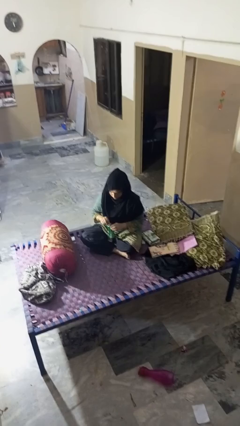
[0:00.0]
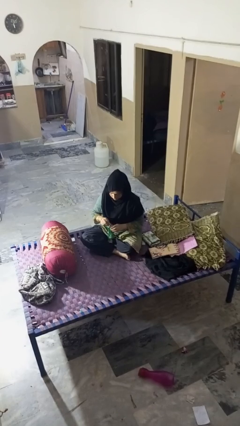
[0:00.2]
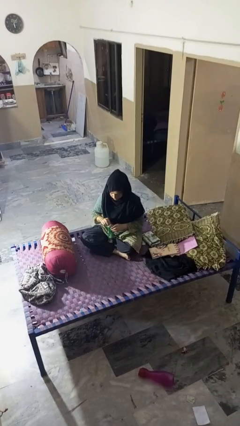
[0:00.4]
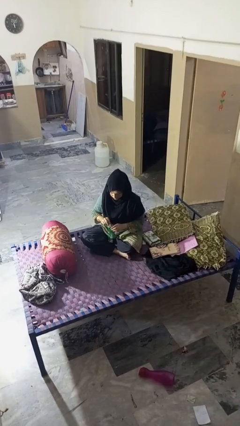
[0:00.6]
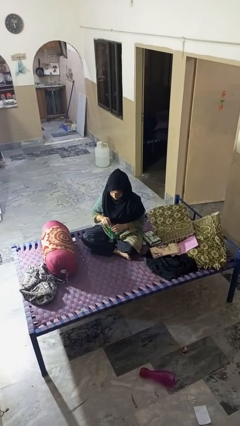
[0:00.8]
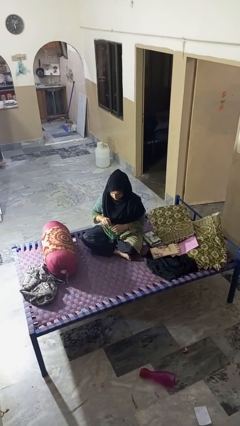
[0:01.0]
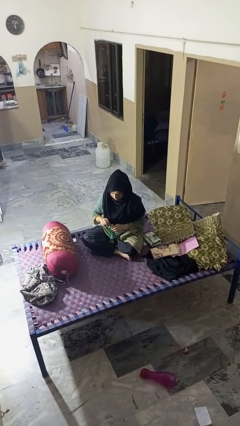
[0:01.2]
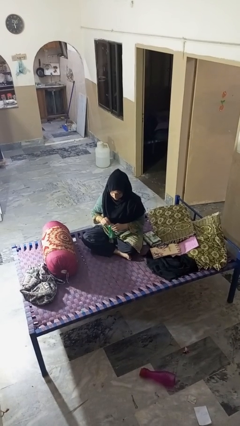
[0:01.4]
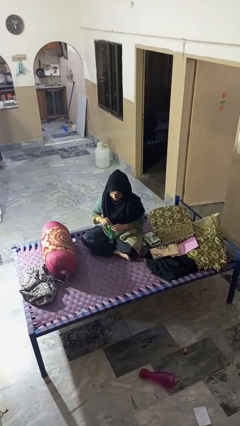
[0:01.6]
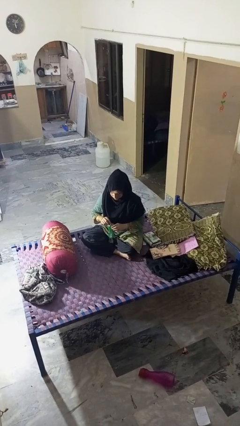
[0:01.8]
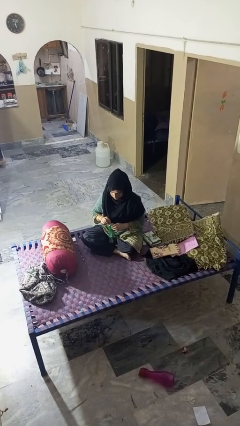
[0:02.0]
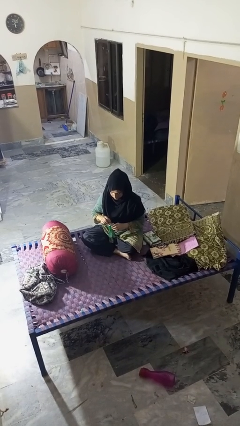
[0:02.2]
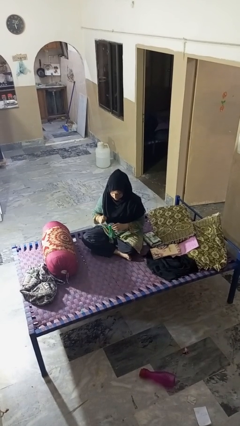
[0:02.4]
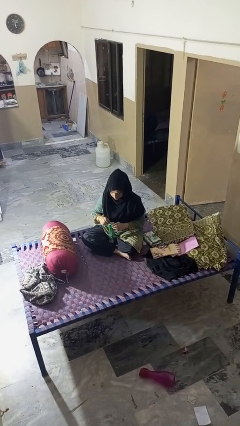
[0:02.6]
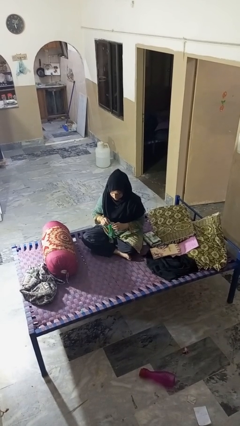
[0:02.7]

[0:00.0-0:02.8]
person opens can with can opener

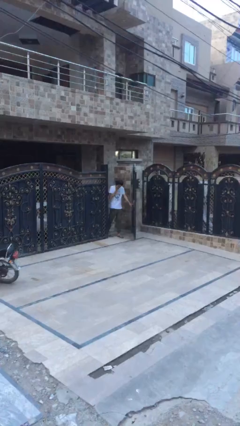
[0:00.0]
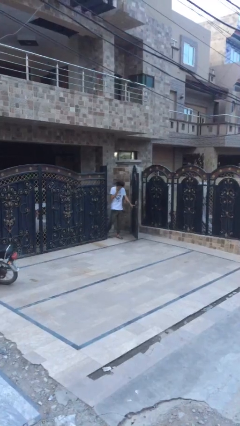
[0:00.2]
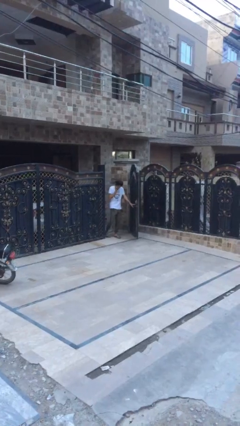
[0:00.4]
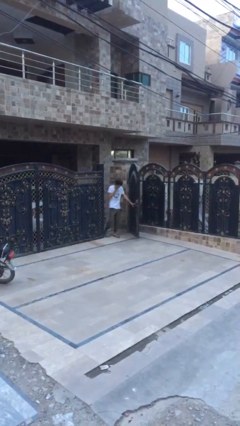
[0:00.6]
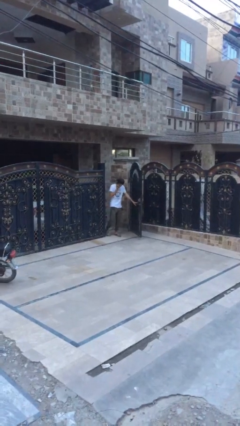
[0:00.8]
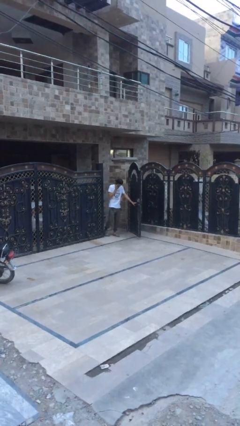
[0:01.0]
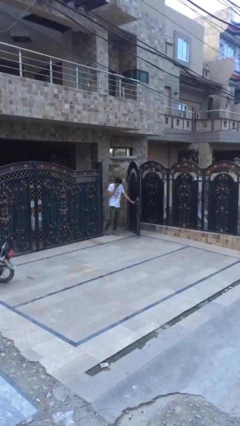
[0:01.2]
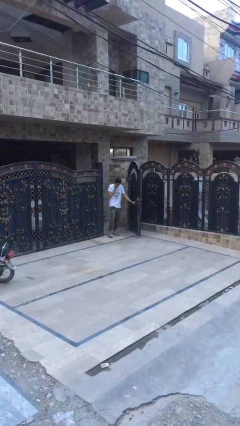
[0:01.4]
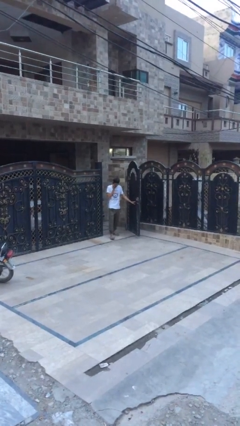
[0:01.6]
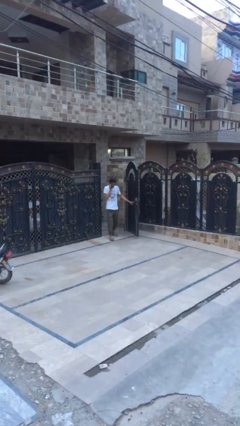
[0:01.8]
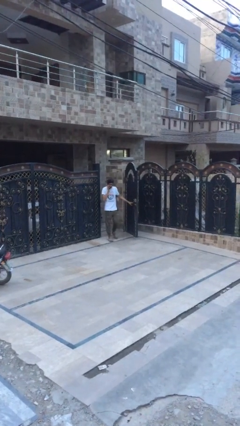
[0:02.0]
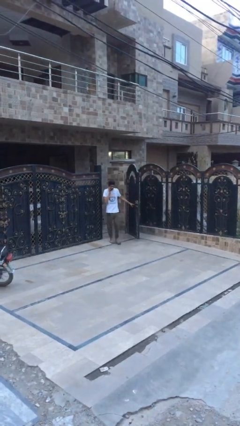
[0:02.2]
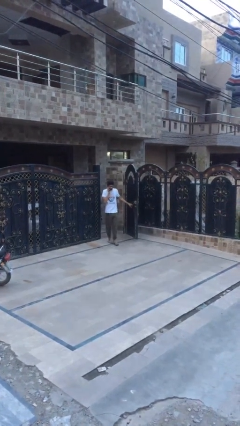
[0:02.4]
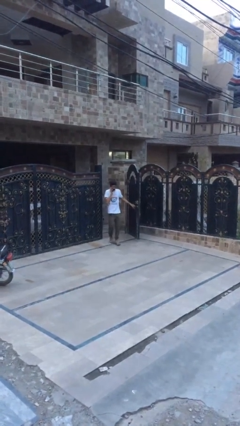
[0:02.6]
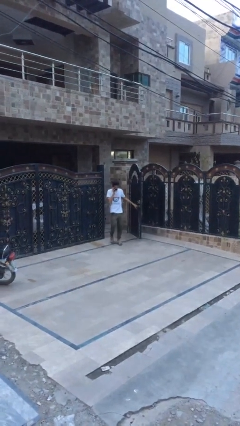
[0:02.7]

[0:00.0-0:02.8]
person enters scene through structure

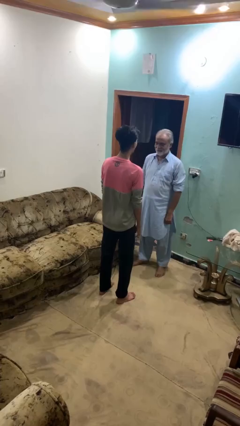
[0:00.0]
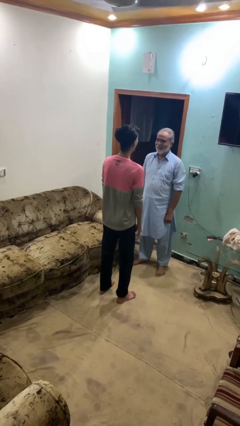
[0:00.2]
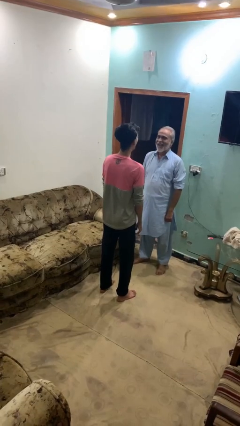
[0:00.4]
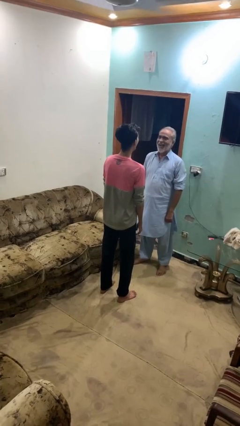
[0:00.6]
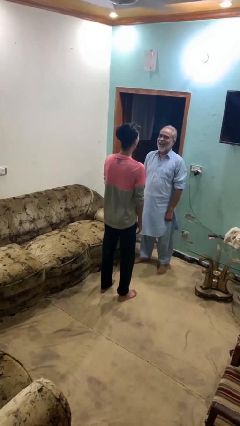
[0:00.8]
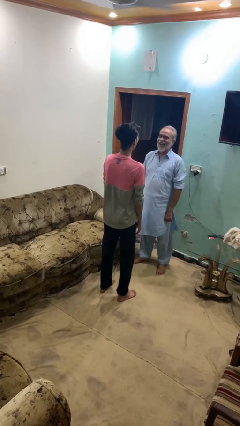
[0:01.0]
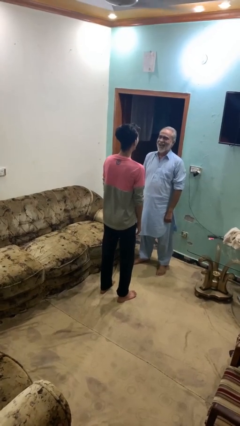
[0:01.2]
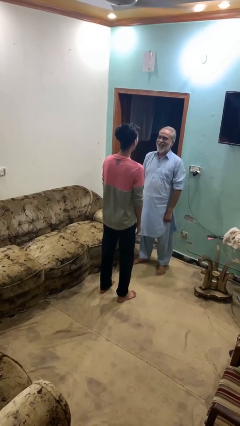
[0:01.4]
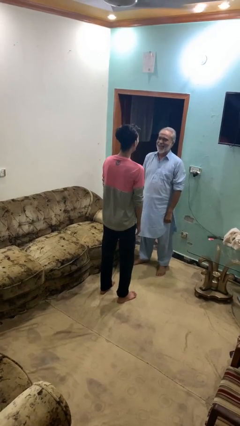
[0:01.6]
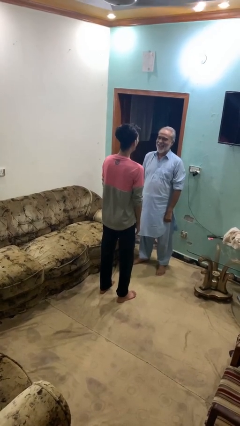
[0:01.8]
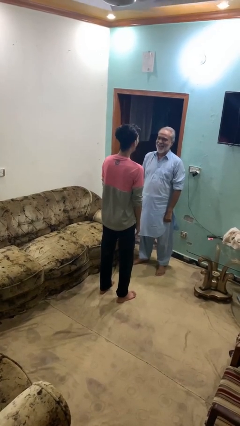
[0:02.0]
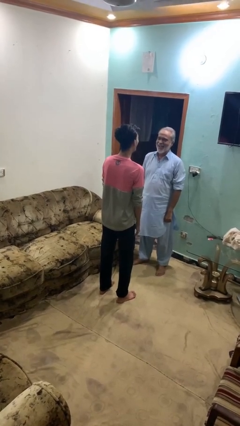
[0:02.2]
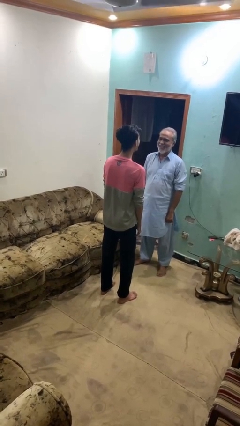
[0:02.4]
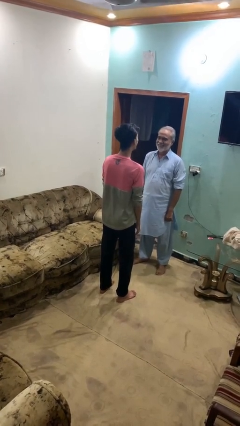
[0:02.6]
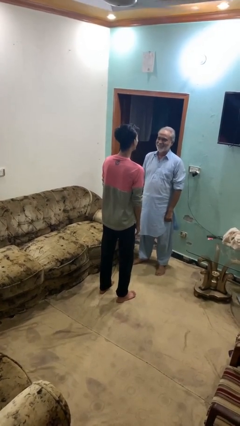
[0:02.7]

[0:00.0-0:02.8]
person laughs with person

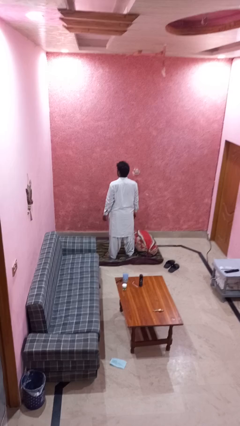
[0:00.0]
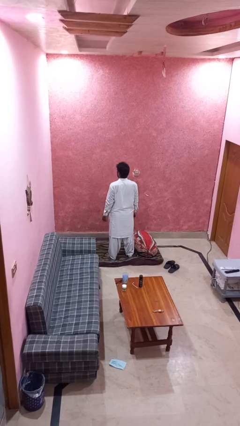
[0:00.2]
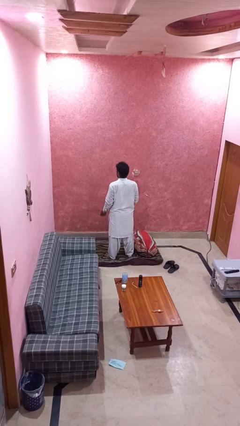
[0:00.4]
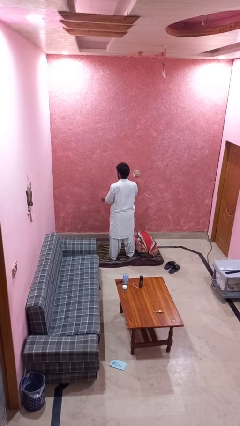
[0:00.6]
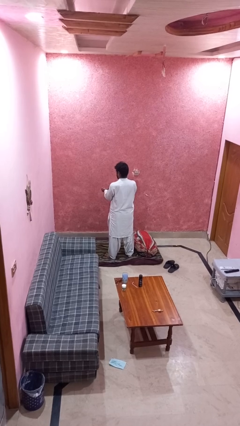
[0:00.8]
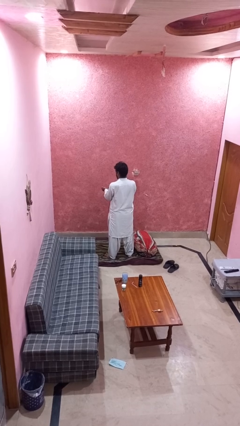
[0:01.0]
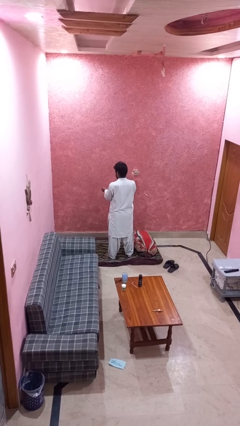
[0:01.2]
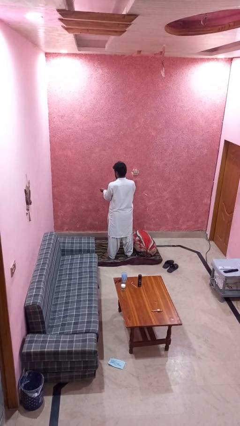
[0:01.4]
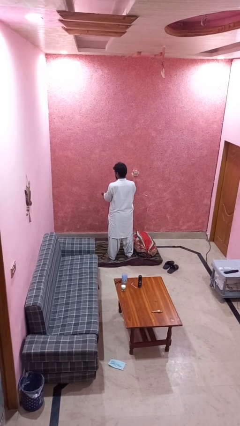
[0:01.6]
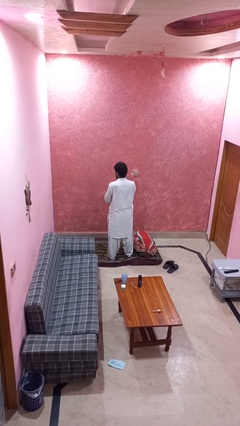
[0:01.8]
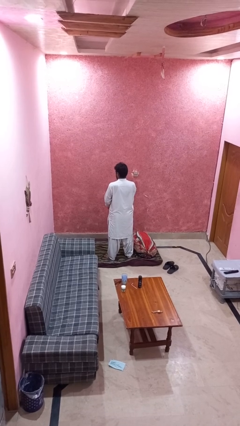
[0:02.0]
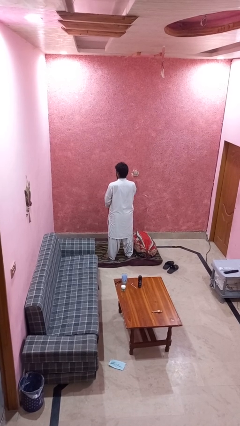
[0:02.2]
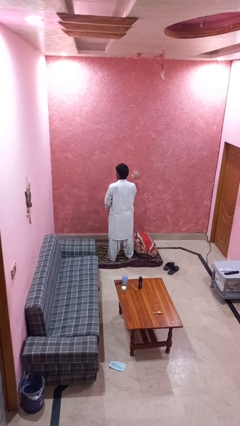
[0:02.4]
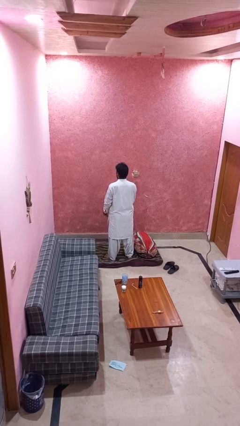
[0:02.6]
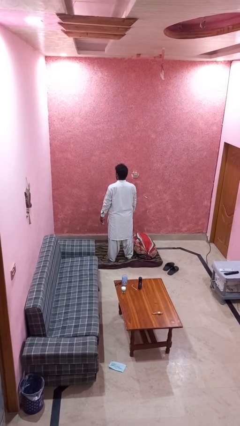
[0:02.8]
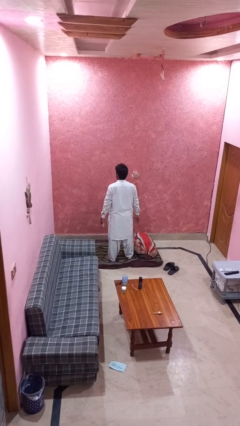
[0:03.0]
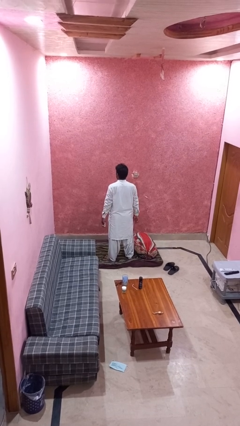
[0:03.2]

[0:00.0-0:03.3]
person takes off wristwatch

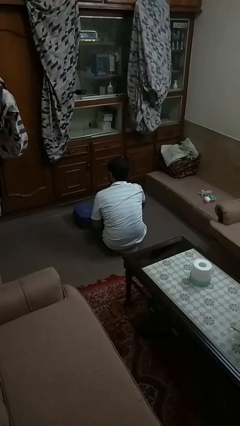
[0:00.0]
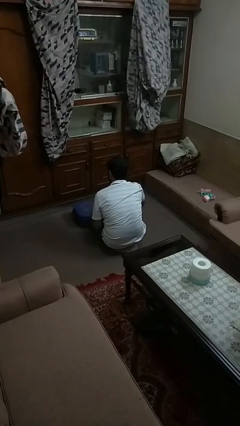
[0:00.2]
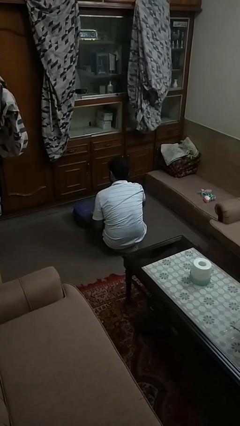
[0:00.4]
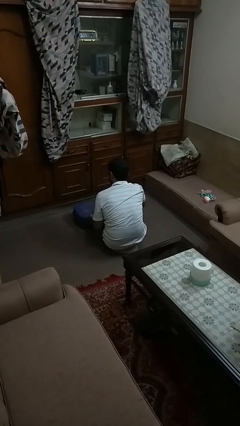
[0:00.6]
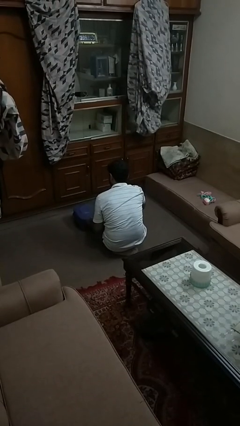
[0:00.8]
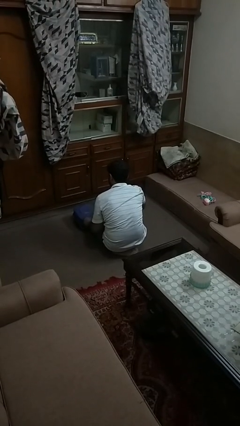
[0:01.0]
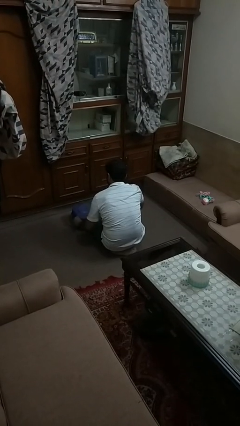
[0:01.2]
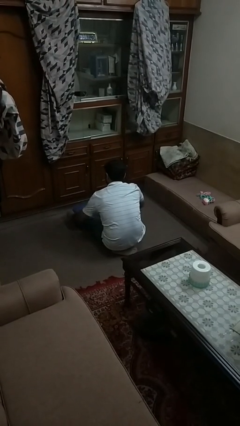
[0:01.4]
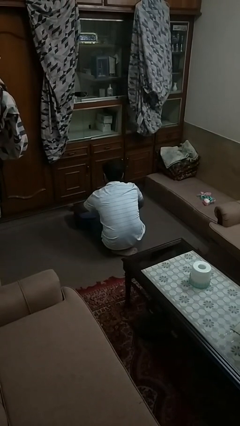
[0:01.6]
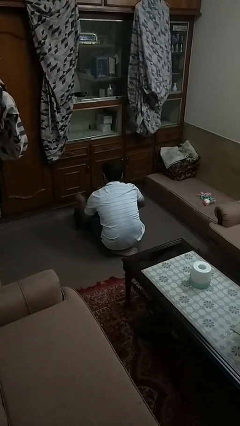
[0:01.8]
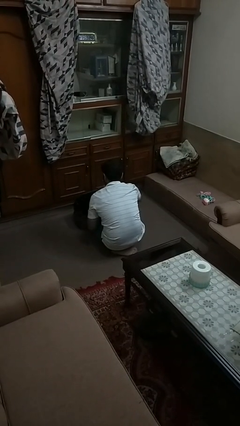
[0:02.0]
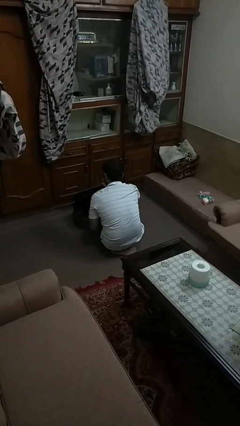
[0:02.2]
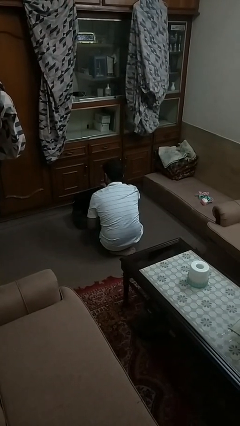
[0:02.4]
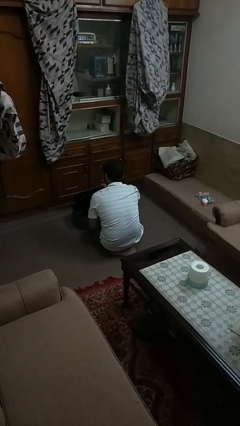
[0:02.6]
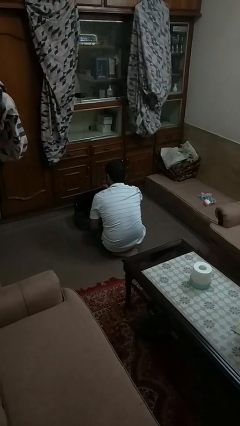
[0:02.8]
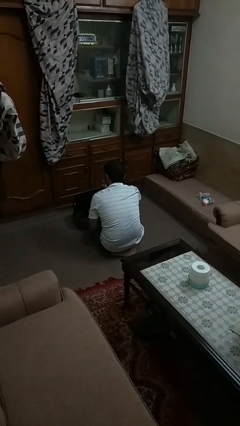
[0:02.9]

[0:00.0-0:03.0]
person opens suitcase

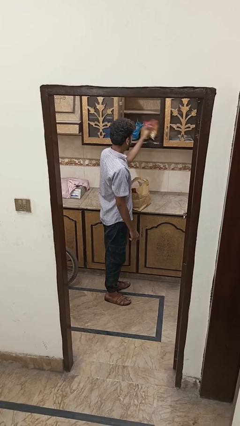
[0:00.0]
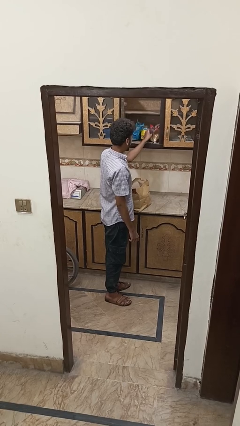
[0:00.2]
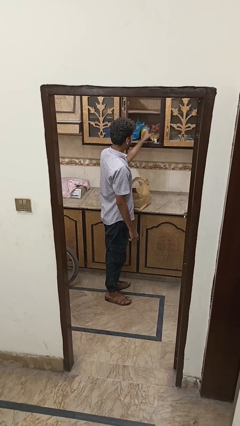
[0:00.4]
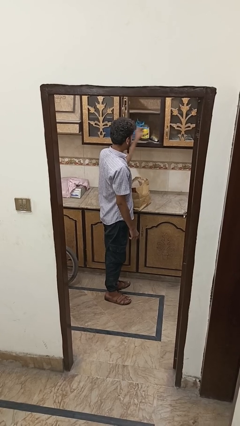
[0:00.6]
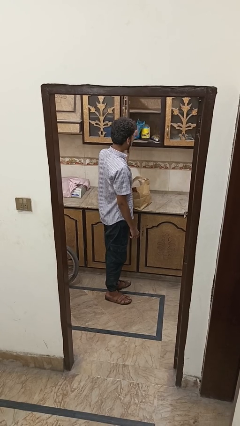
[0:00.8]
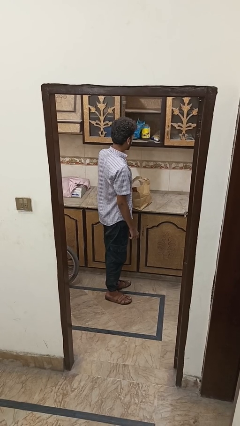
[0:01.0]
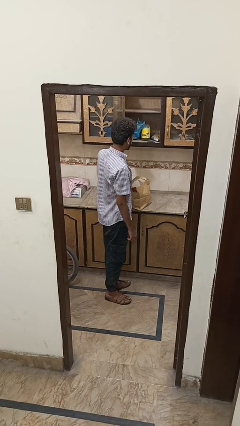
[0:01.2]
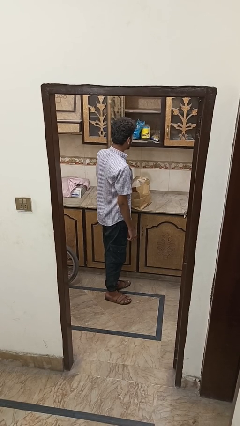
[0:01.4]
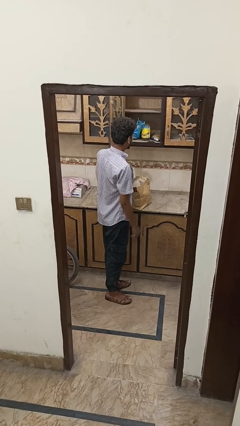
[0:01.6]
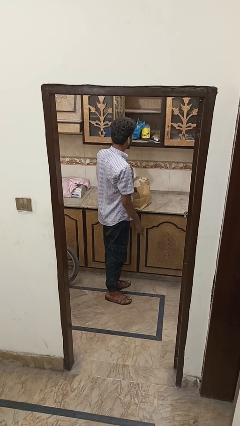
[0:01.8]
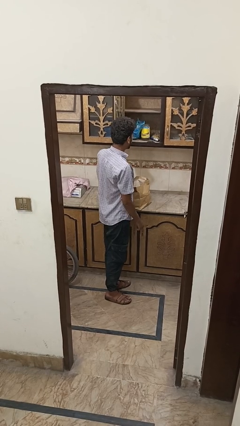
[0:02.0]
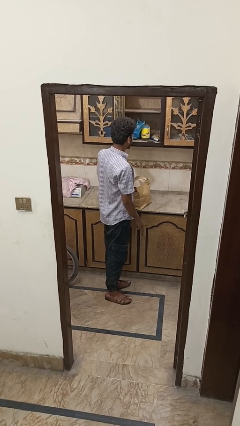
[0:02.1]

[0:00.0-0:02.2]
person uncovers with bedsheets

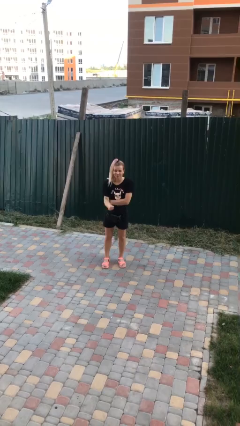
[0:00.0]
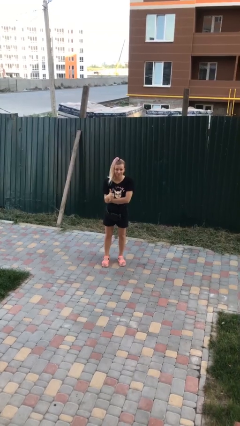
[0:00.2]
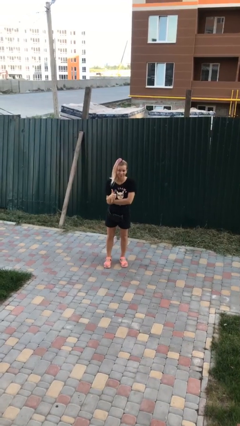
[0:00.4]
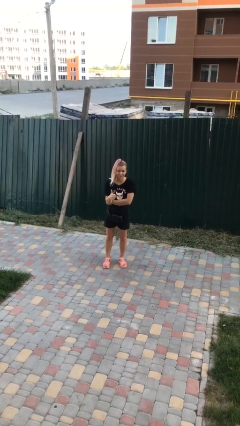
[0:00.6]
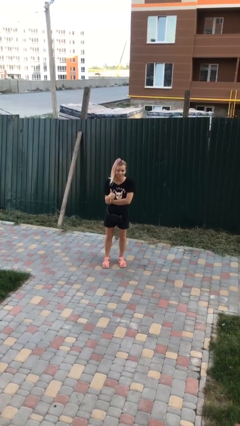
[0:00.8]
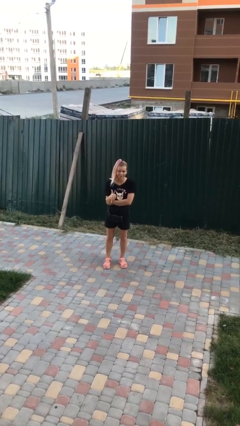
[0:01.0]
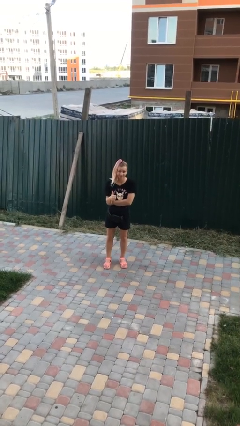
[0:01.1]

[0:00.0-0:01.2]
person gestures thumbs up
